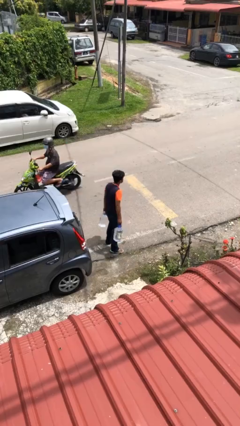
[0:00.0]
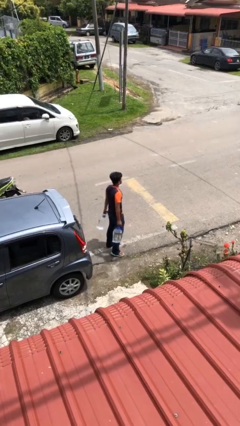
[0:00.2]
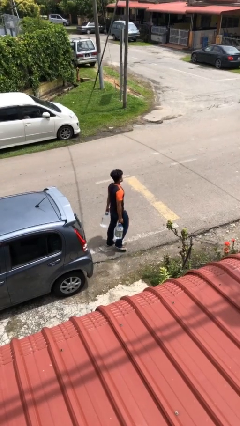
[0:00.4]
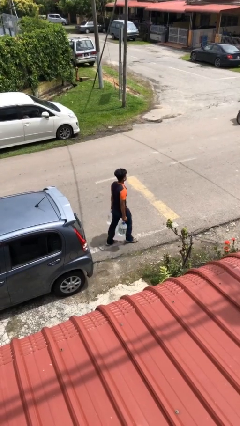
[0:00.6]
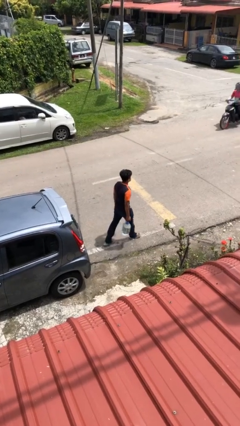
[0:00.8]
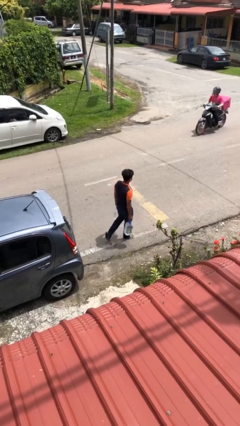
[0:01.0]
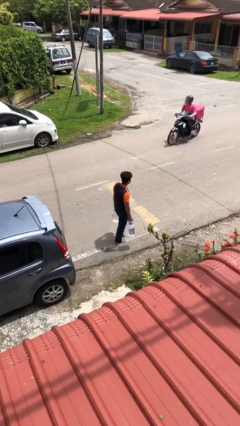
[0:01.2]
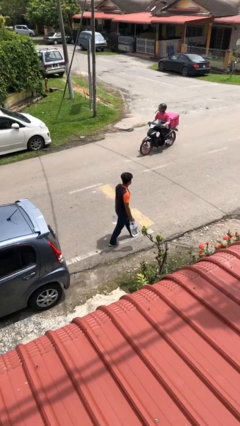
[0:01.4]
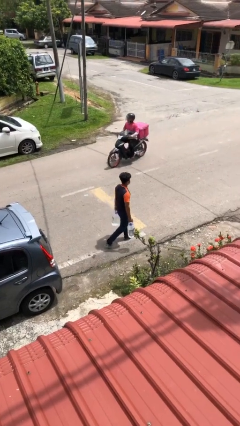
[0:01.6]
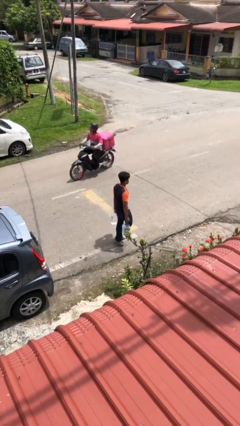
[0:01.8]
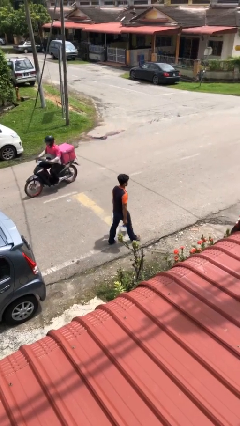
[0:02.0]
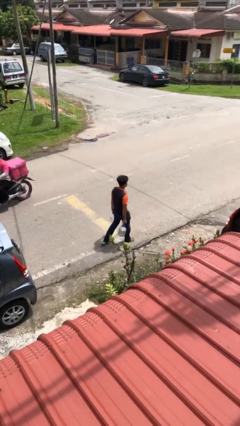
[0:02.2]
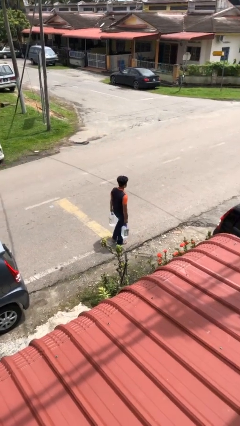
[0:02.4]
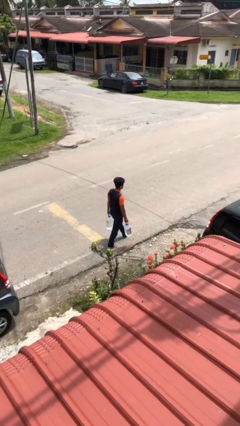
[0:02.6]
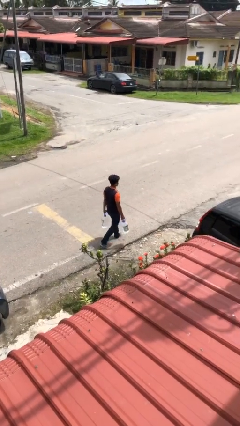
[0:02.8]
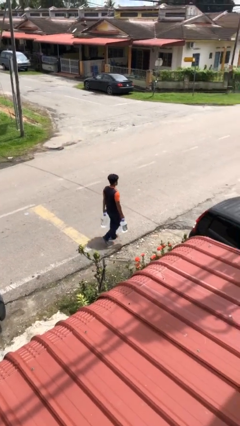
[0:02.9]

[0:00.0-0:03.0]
person carries heavy object

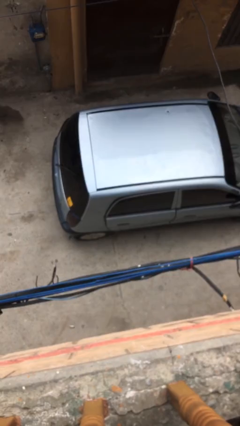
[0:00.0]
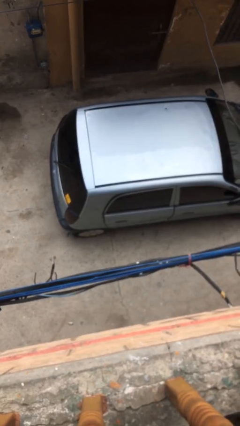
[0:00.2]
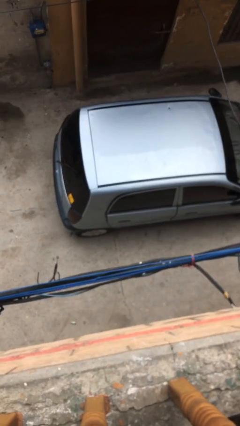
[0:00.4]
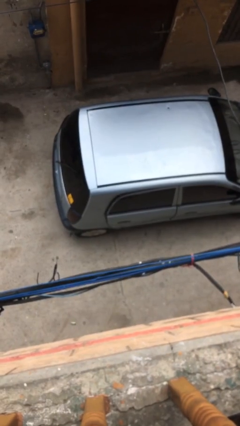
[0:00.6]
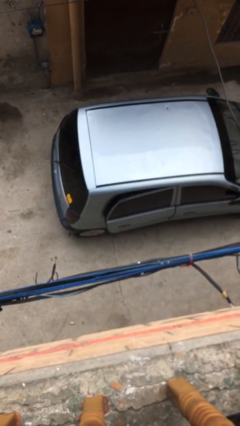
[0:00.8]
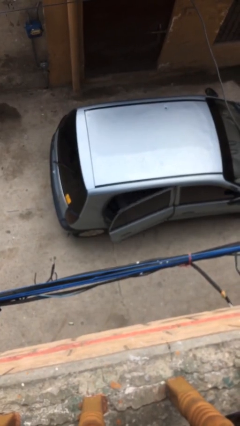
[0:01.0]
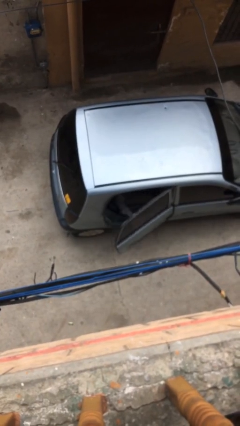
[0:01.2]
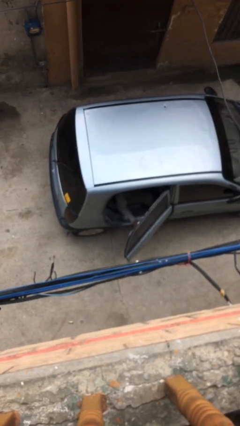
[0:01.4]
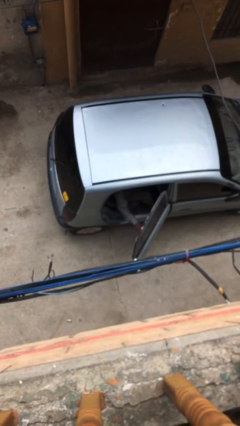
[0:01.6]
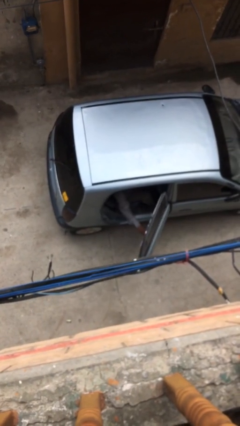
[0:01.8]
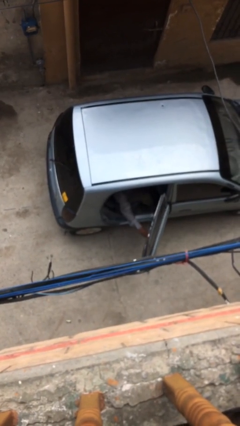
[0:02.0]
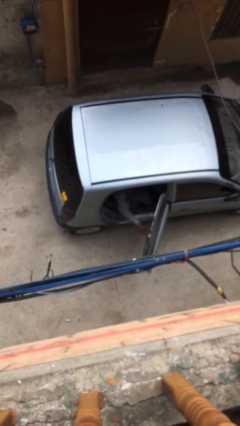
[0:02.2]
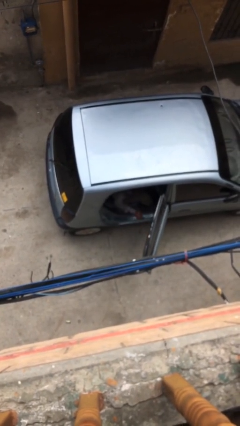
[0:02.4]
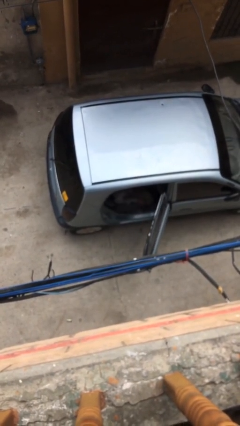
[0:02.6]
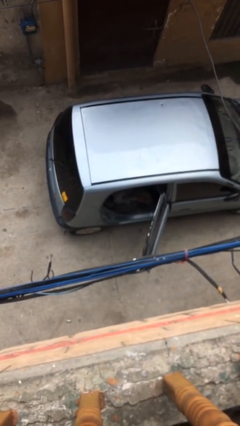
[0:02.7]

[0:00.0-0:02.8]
person opens car door

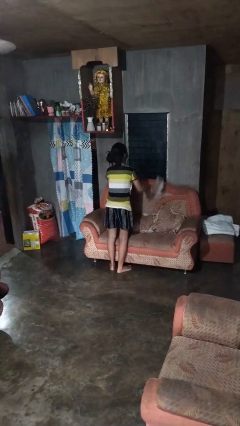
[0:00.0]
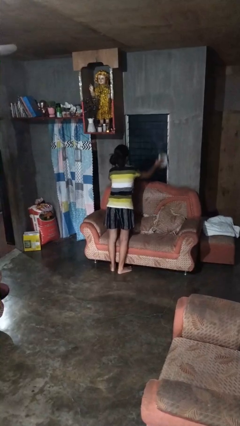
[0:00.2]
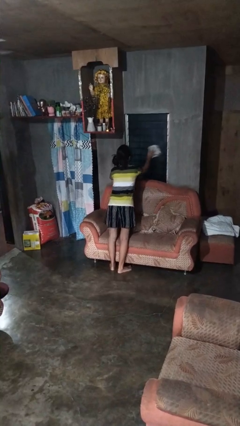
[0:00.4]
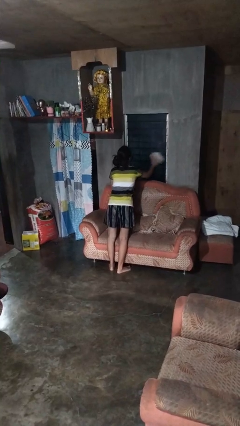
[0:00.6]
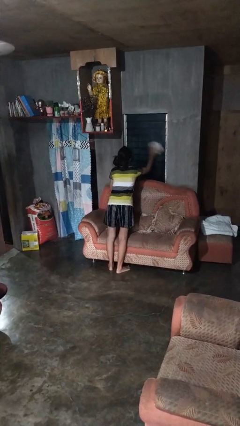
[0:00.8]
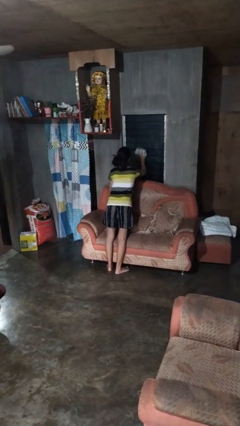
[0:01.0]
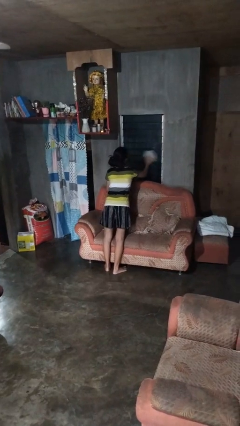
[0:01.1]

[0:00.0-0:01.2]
person washes window

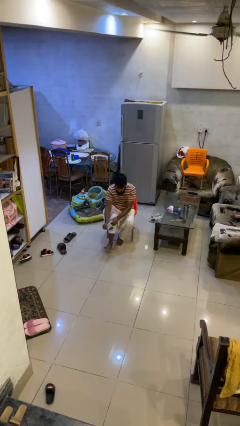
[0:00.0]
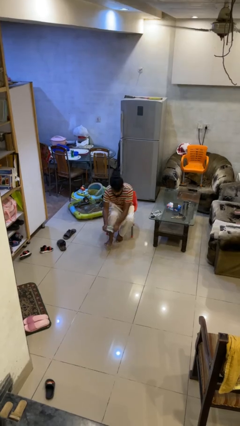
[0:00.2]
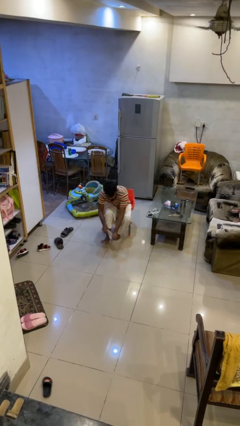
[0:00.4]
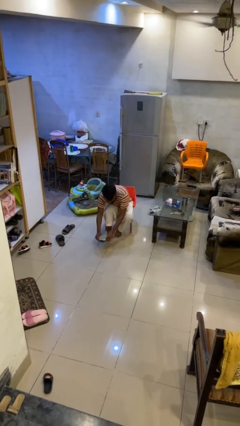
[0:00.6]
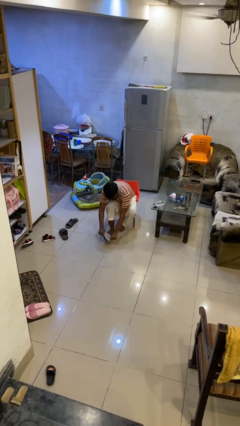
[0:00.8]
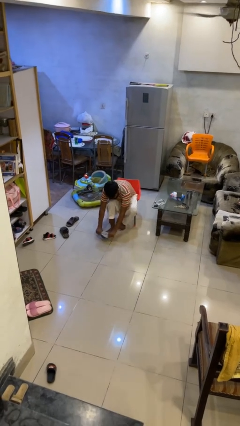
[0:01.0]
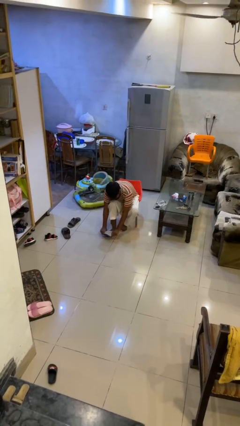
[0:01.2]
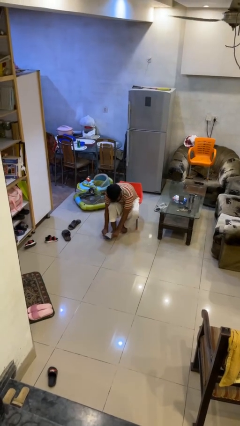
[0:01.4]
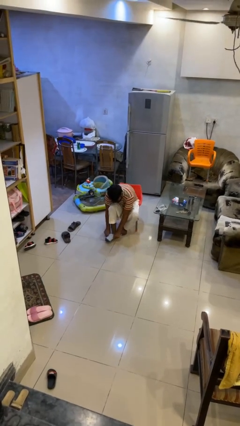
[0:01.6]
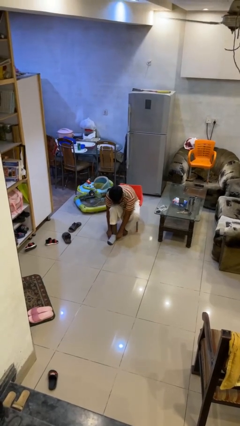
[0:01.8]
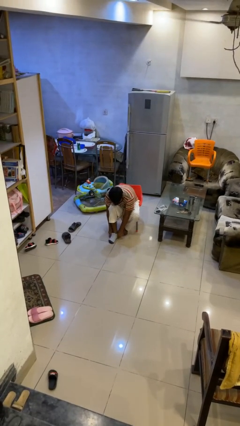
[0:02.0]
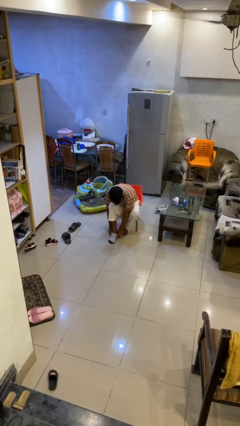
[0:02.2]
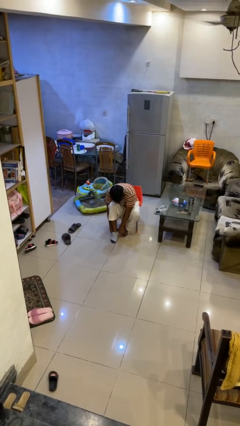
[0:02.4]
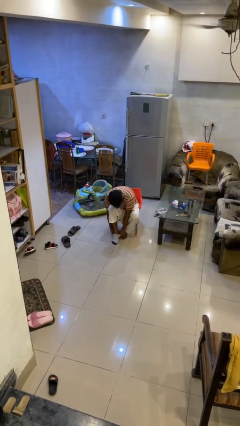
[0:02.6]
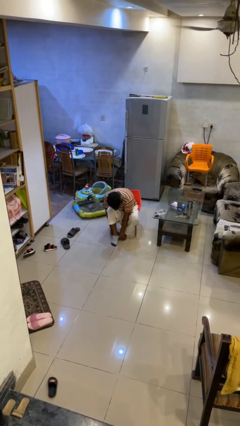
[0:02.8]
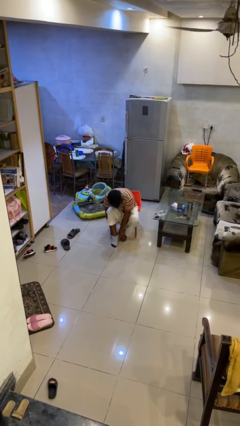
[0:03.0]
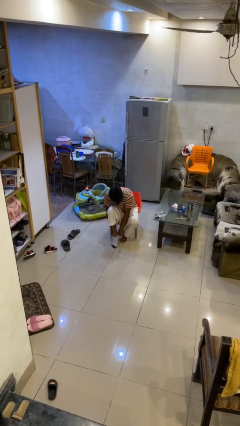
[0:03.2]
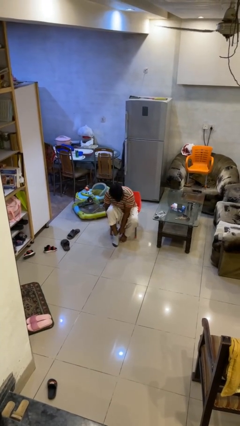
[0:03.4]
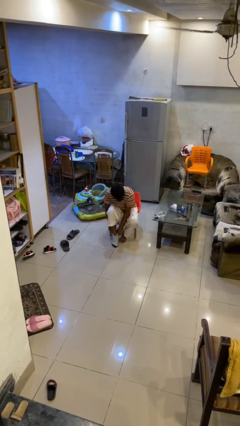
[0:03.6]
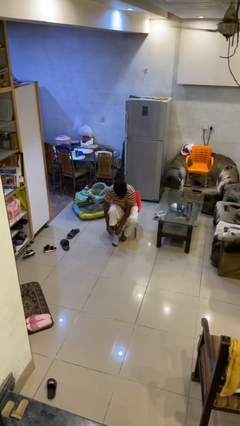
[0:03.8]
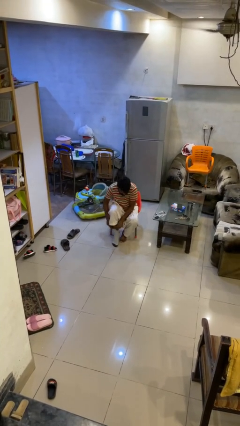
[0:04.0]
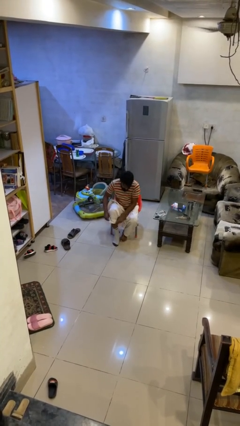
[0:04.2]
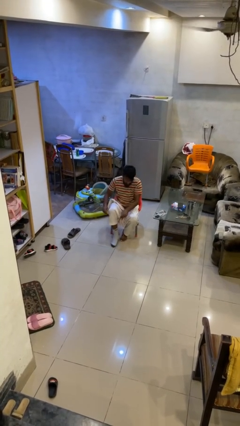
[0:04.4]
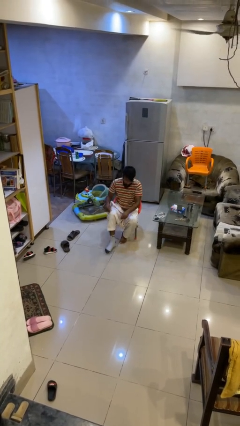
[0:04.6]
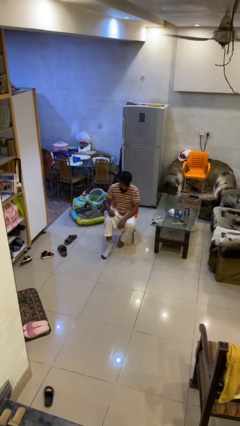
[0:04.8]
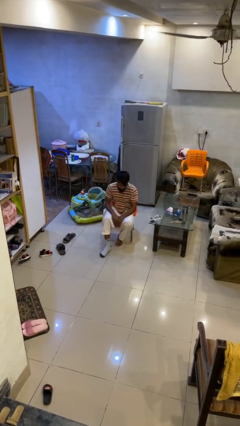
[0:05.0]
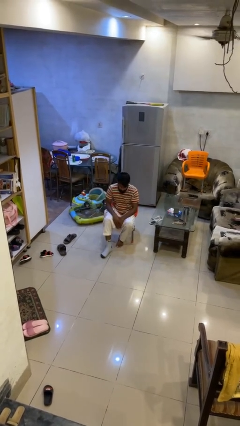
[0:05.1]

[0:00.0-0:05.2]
person puts on socks

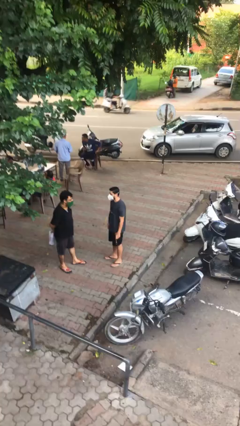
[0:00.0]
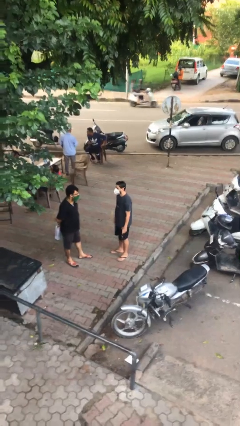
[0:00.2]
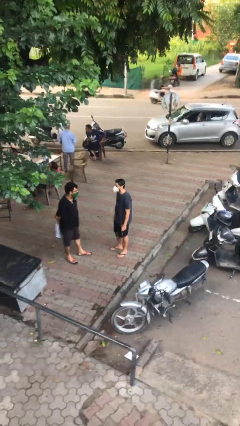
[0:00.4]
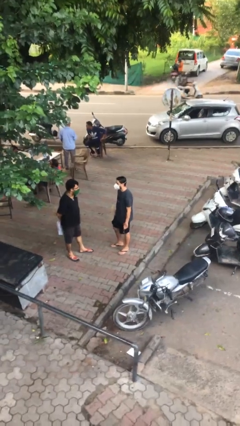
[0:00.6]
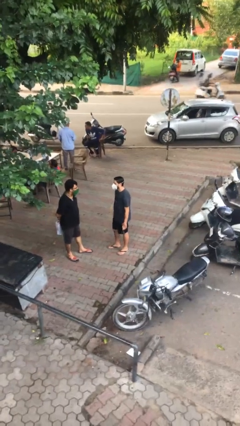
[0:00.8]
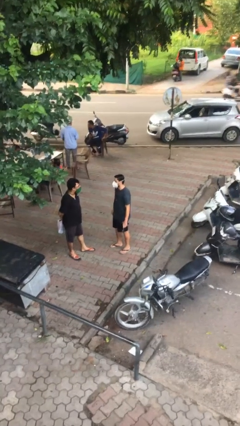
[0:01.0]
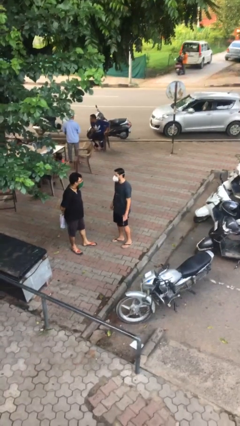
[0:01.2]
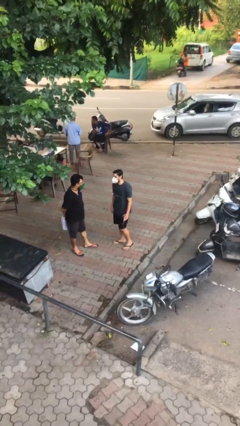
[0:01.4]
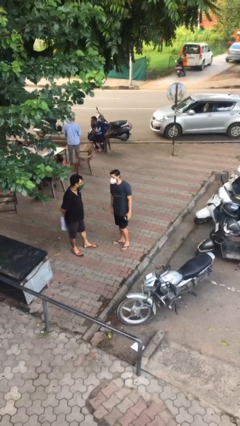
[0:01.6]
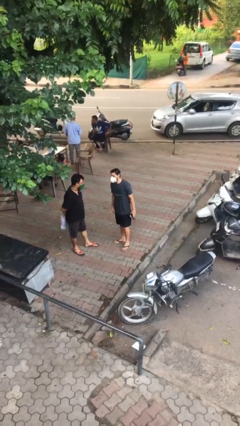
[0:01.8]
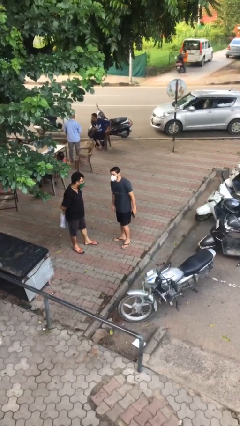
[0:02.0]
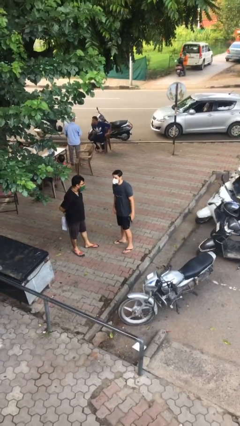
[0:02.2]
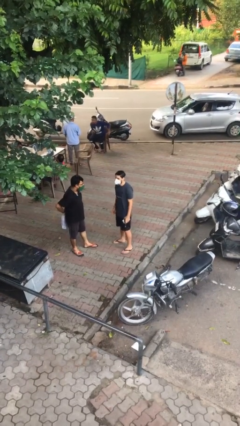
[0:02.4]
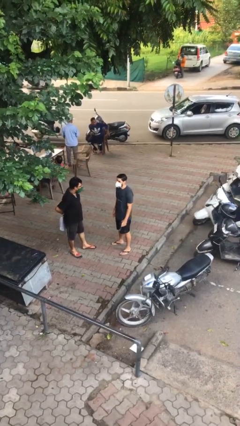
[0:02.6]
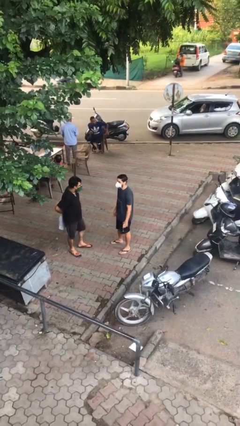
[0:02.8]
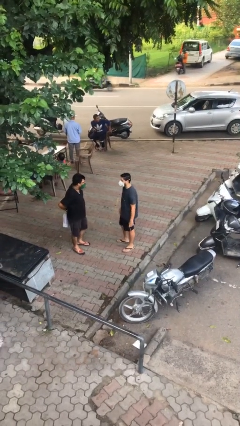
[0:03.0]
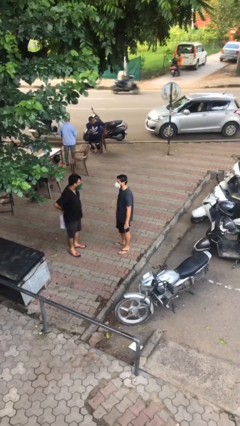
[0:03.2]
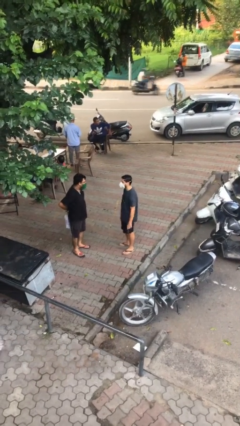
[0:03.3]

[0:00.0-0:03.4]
person talks to person

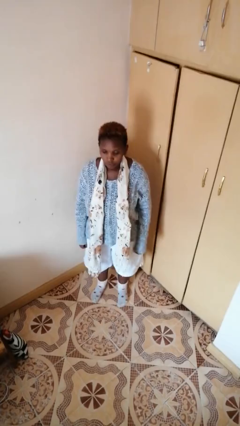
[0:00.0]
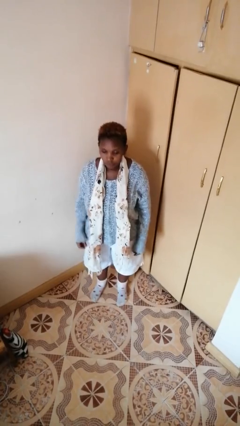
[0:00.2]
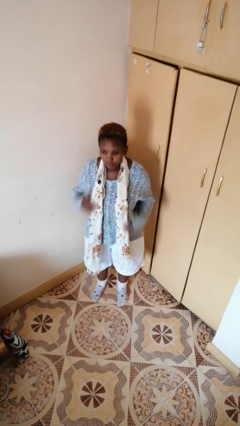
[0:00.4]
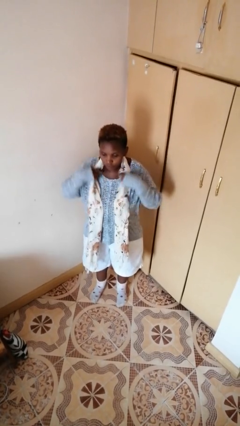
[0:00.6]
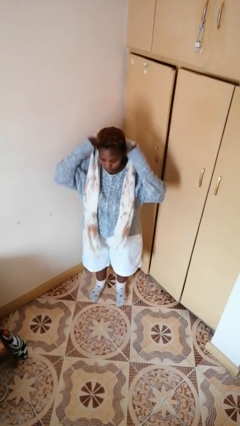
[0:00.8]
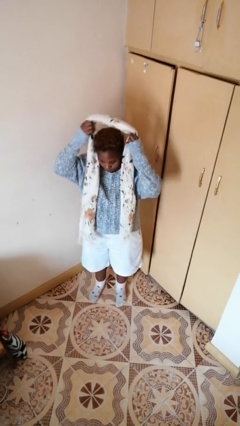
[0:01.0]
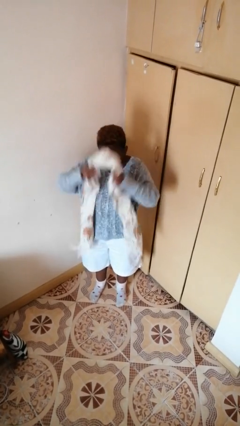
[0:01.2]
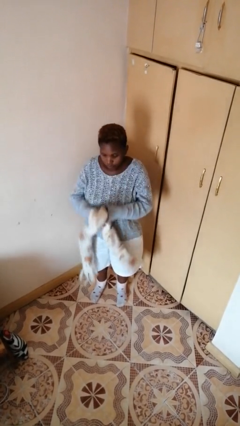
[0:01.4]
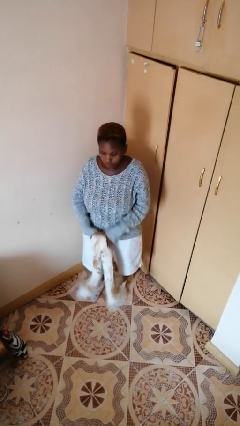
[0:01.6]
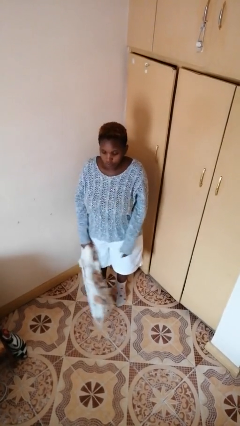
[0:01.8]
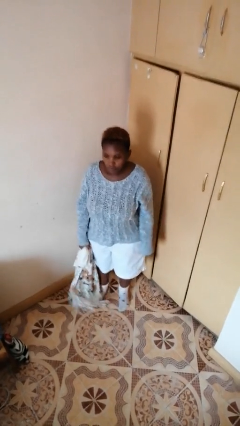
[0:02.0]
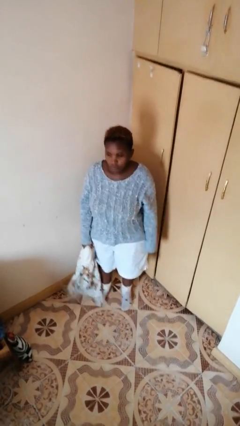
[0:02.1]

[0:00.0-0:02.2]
person takes off scarf
